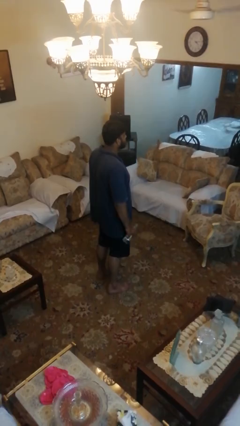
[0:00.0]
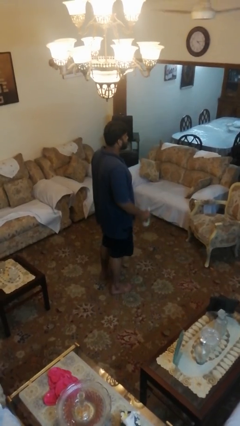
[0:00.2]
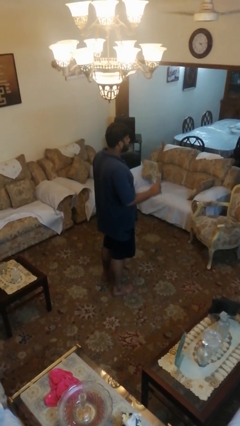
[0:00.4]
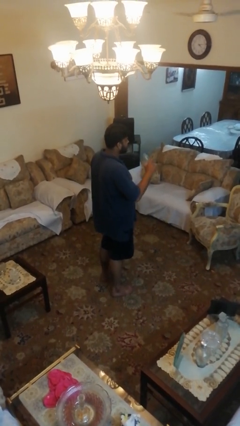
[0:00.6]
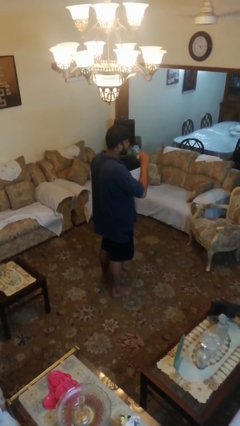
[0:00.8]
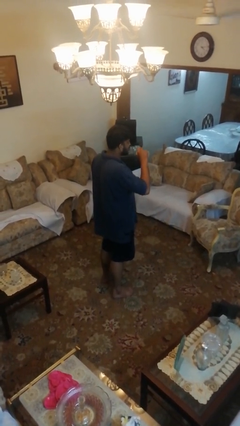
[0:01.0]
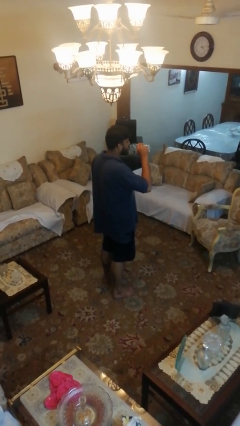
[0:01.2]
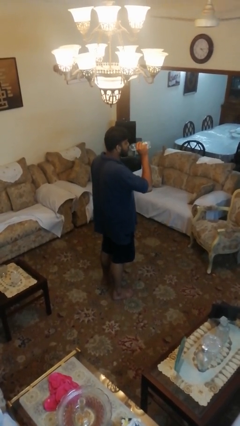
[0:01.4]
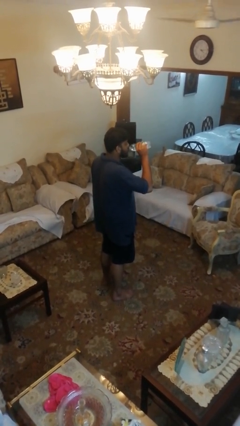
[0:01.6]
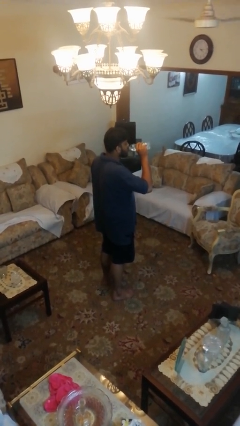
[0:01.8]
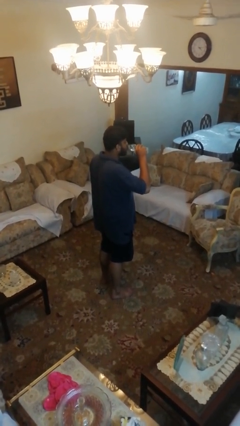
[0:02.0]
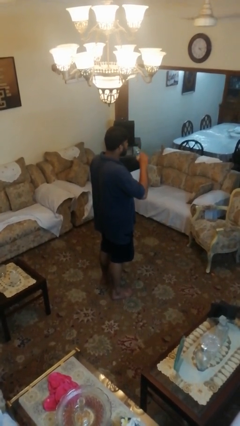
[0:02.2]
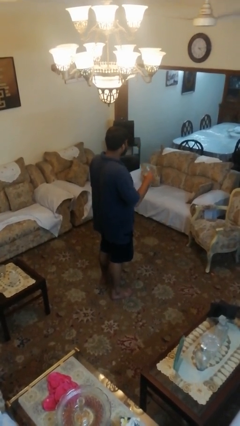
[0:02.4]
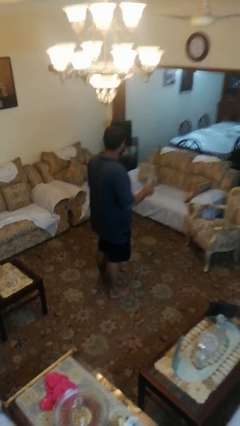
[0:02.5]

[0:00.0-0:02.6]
person drinks from bottle

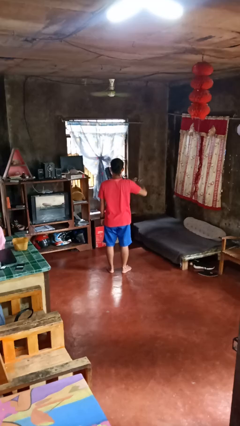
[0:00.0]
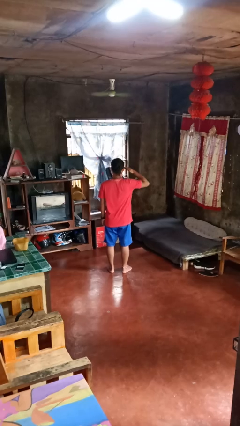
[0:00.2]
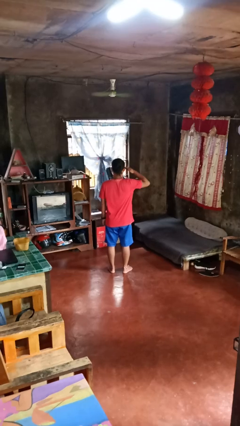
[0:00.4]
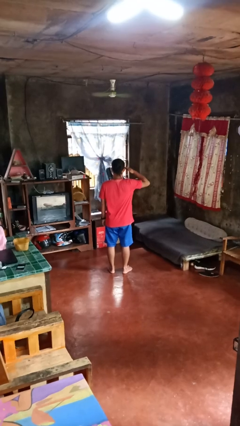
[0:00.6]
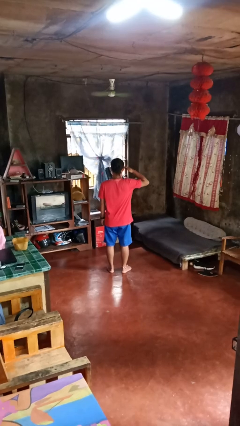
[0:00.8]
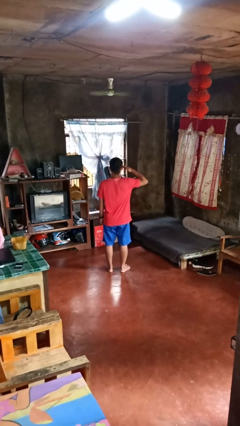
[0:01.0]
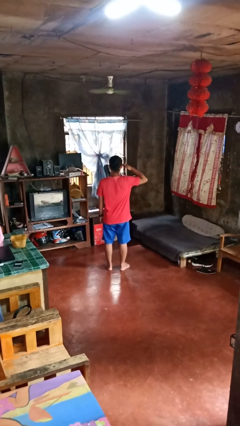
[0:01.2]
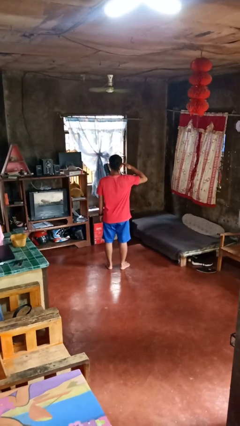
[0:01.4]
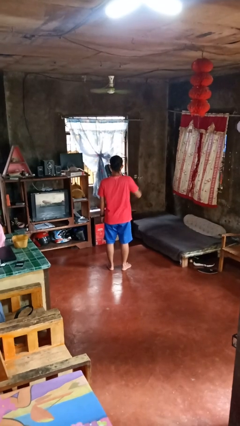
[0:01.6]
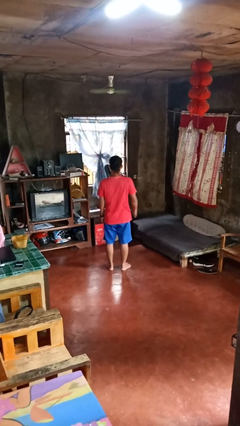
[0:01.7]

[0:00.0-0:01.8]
person salutes

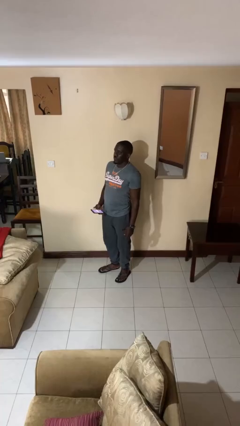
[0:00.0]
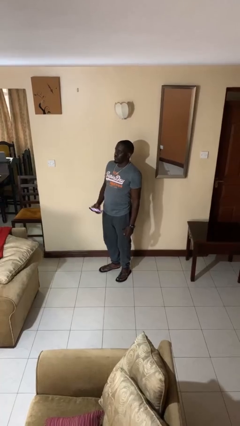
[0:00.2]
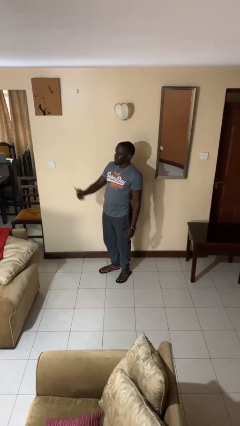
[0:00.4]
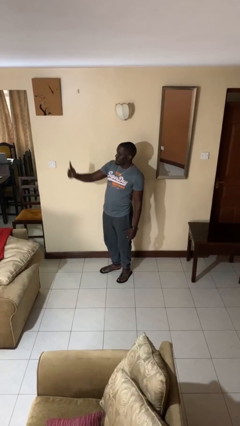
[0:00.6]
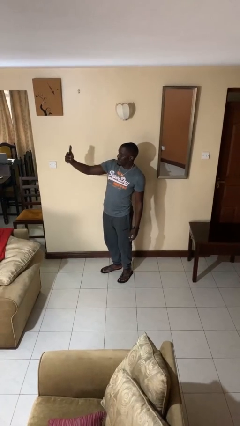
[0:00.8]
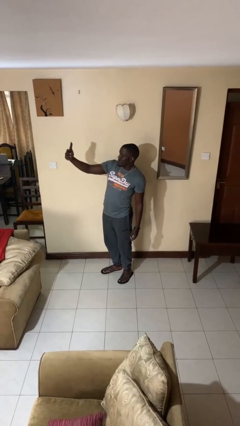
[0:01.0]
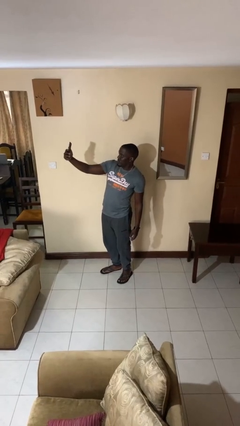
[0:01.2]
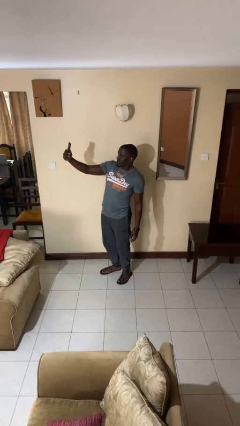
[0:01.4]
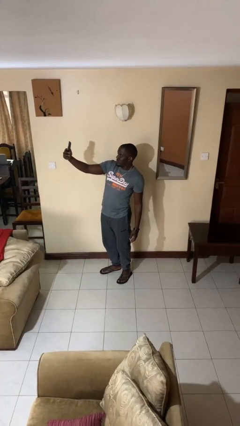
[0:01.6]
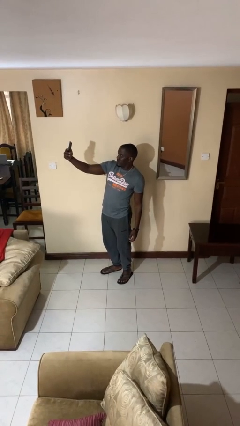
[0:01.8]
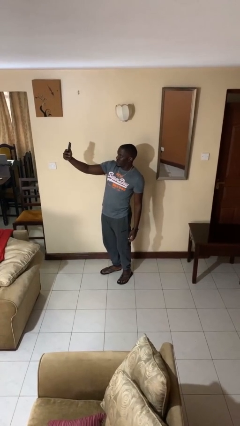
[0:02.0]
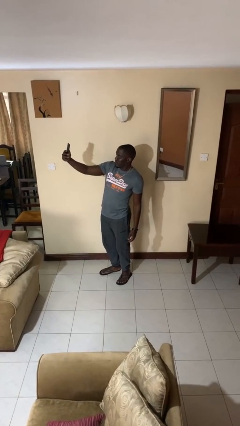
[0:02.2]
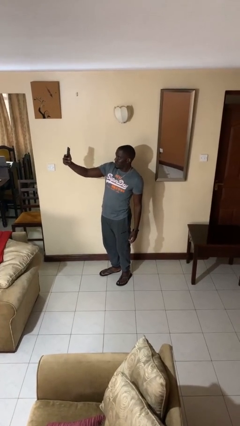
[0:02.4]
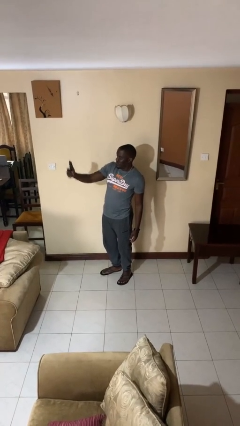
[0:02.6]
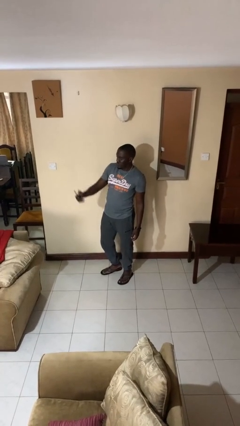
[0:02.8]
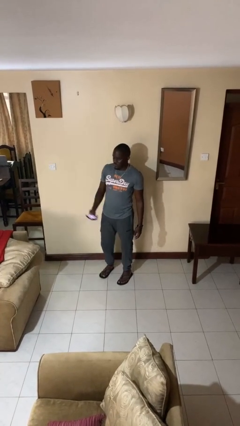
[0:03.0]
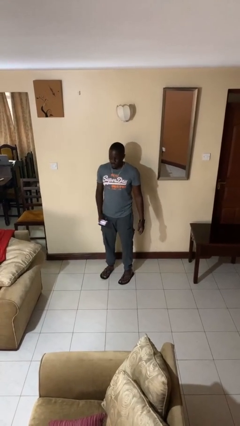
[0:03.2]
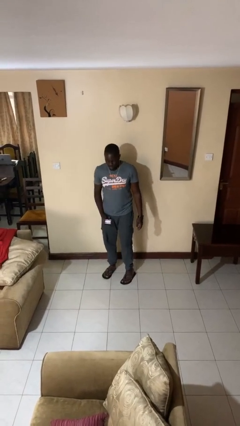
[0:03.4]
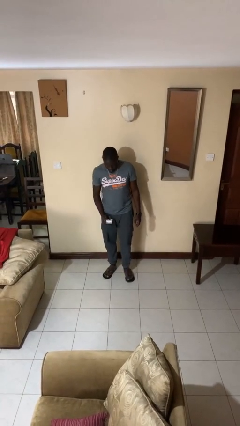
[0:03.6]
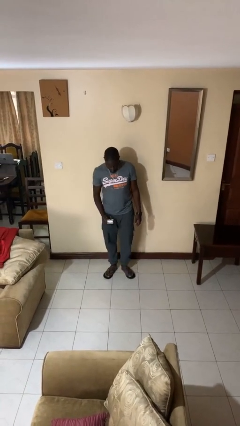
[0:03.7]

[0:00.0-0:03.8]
person takes selfie

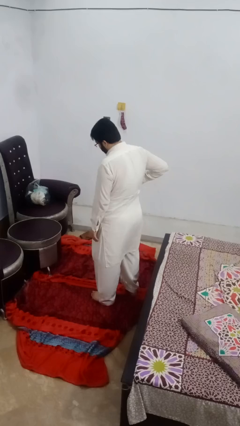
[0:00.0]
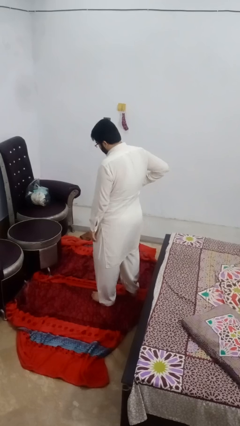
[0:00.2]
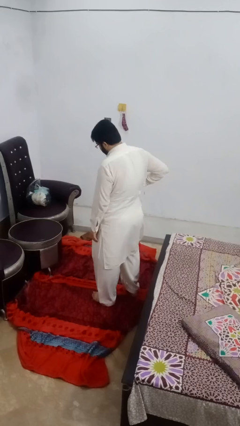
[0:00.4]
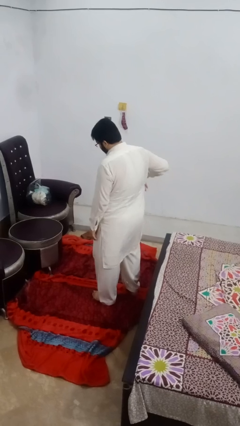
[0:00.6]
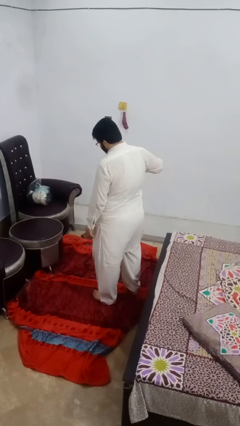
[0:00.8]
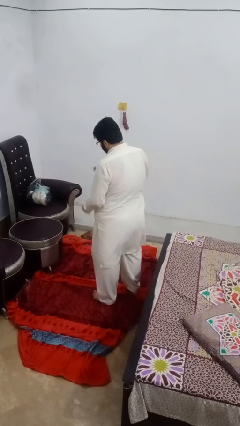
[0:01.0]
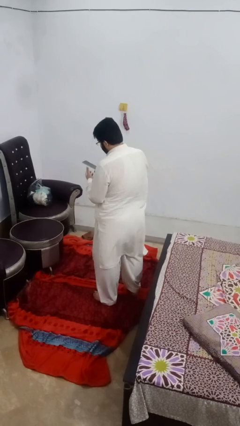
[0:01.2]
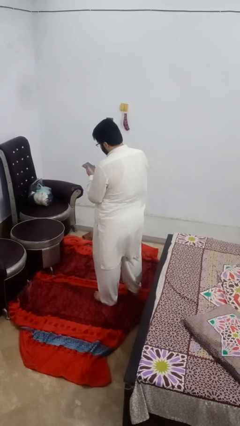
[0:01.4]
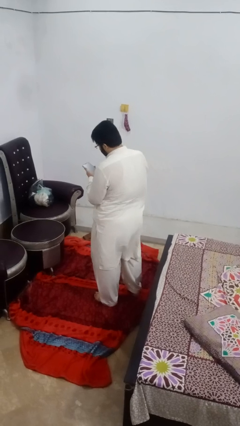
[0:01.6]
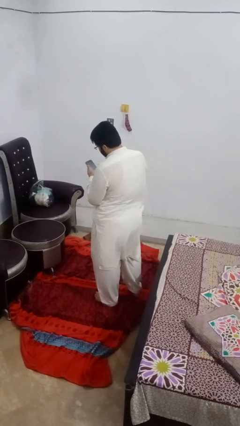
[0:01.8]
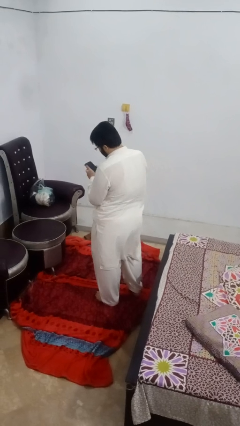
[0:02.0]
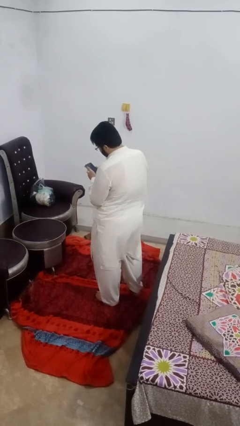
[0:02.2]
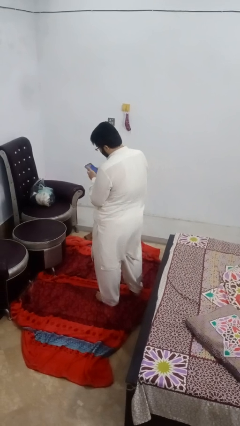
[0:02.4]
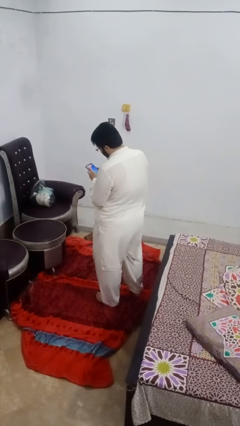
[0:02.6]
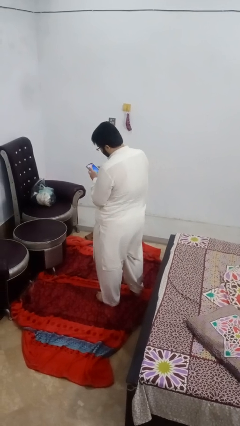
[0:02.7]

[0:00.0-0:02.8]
person takes phone from pocket

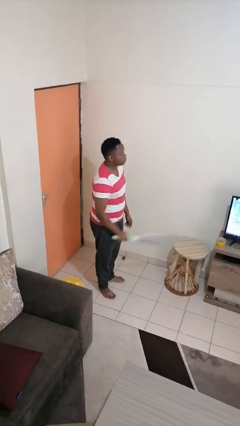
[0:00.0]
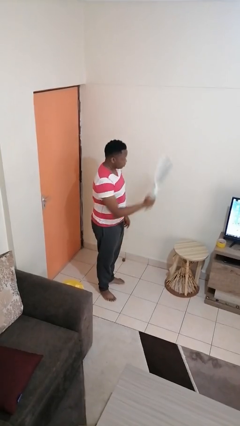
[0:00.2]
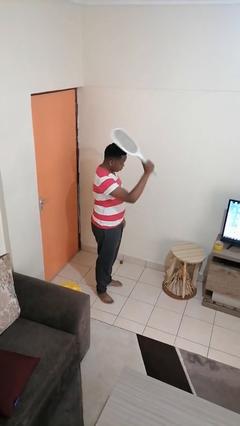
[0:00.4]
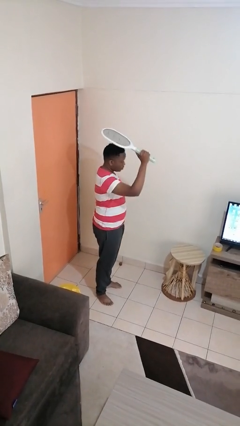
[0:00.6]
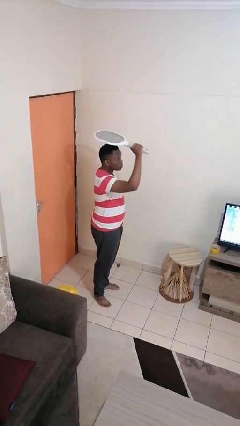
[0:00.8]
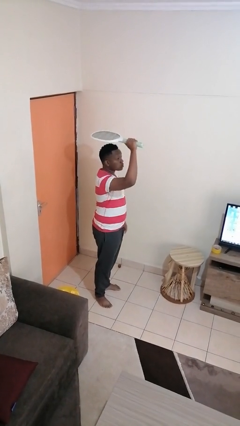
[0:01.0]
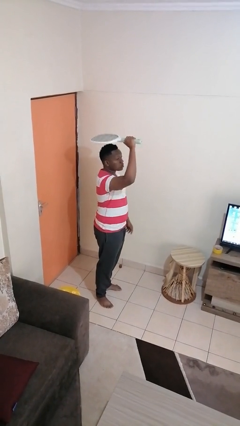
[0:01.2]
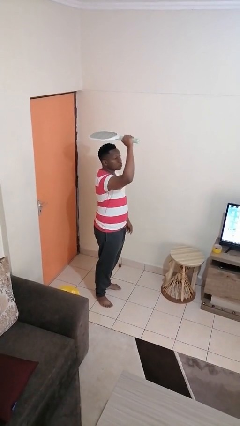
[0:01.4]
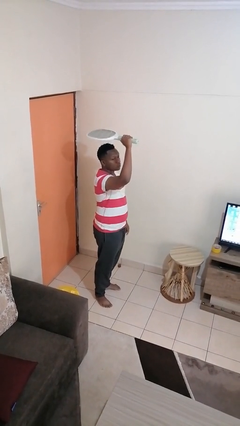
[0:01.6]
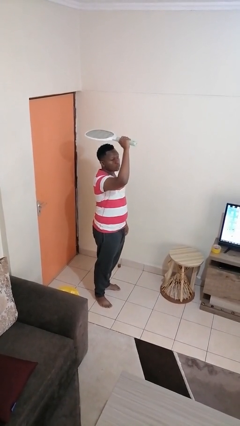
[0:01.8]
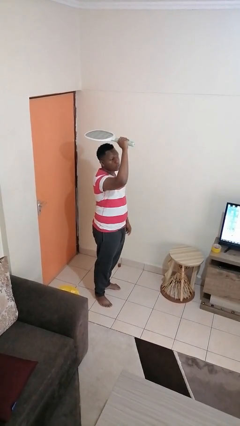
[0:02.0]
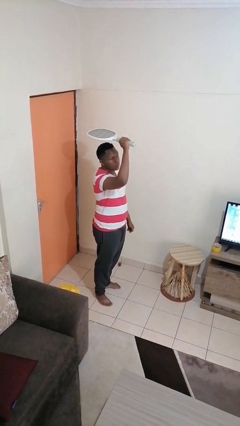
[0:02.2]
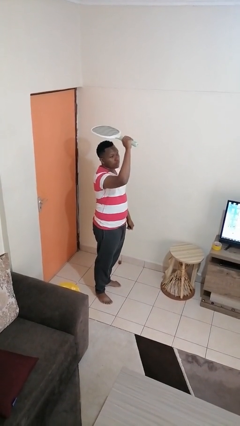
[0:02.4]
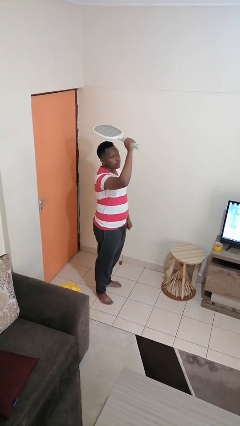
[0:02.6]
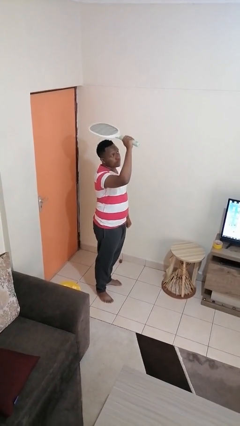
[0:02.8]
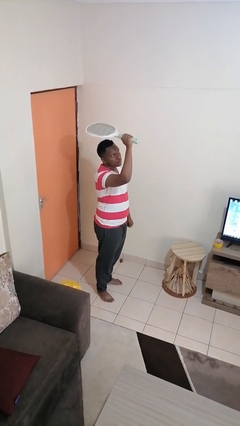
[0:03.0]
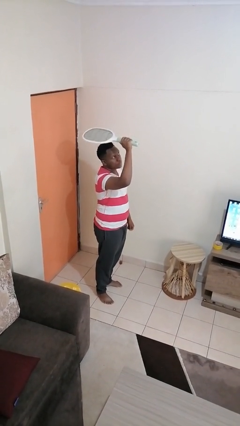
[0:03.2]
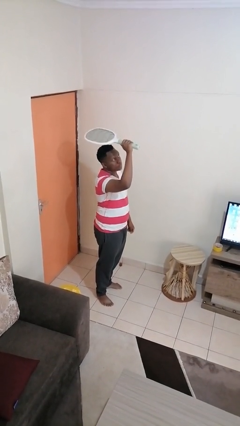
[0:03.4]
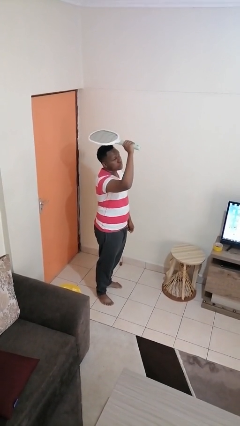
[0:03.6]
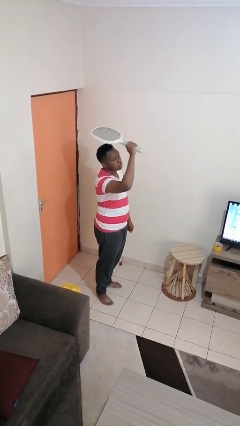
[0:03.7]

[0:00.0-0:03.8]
person holds object above head

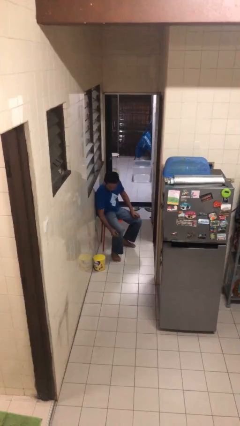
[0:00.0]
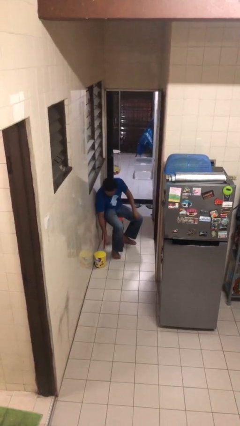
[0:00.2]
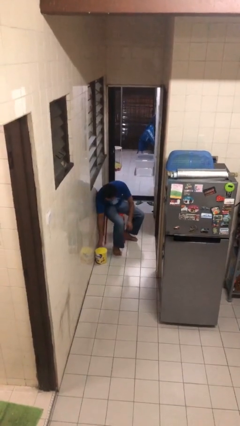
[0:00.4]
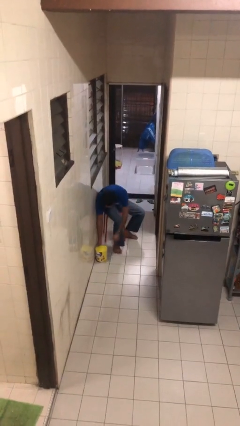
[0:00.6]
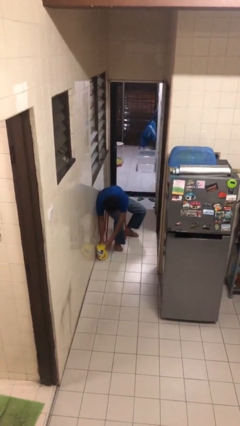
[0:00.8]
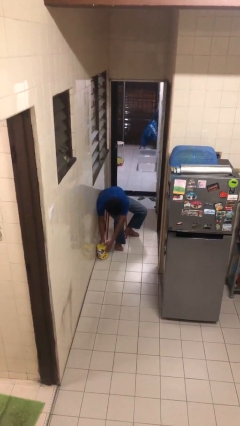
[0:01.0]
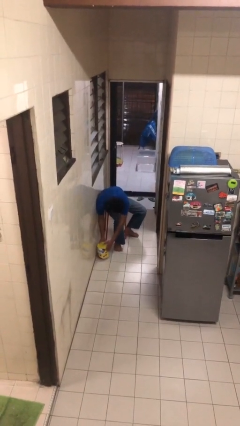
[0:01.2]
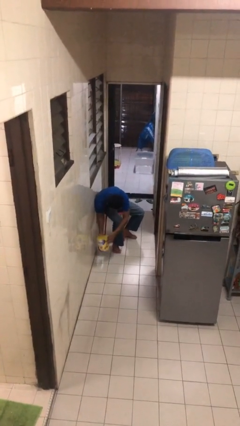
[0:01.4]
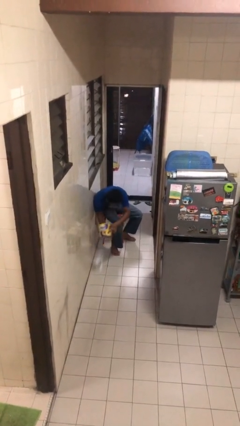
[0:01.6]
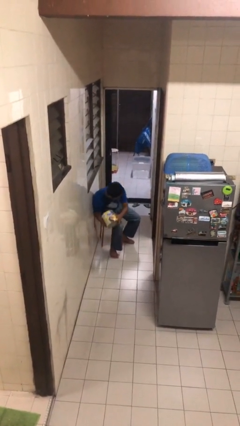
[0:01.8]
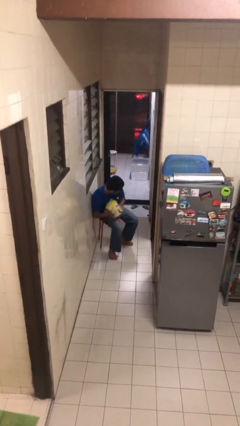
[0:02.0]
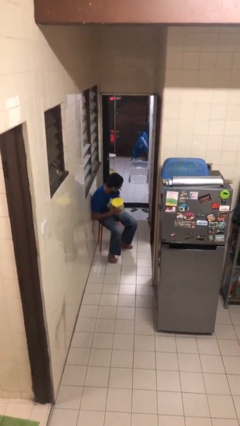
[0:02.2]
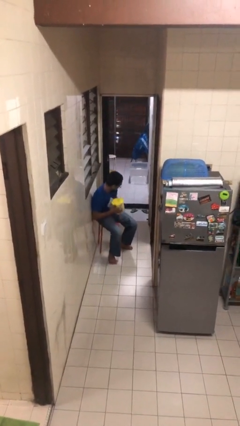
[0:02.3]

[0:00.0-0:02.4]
person picks up object from floor
